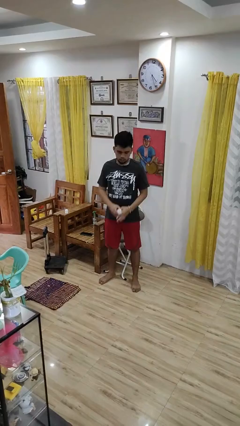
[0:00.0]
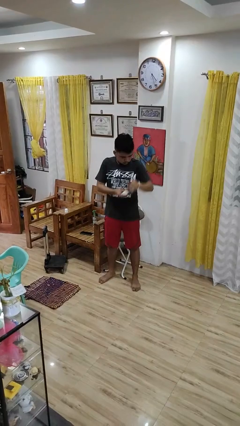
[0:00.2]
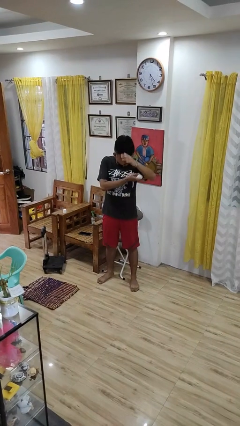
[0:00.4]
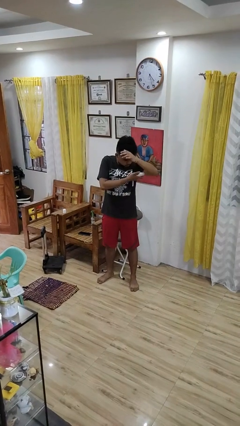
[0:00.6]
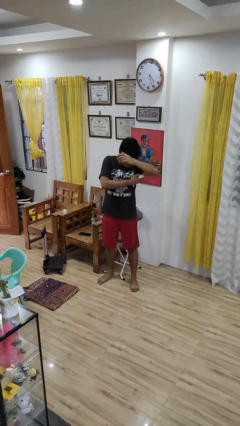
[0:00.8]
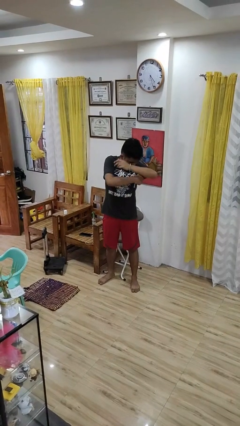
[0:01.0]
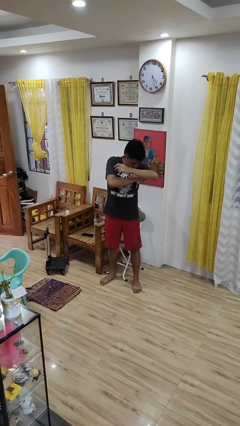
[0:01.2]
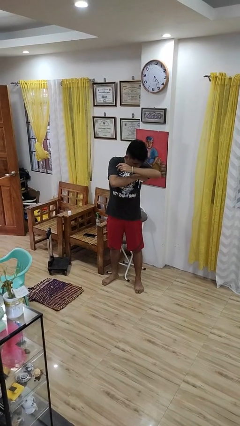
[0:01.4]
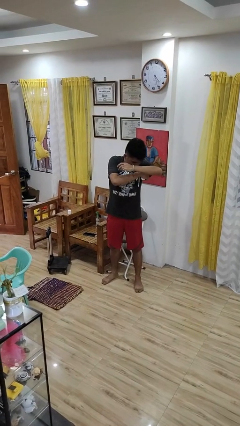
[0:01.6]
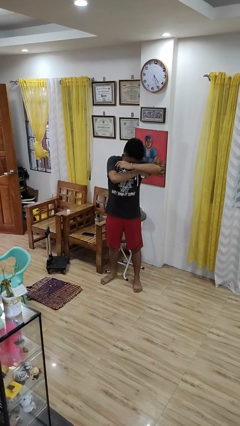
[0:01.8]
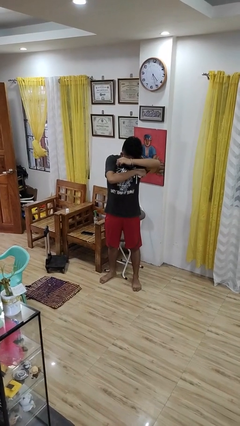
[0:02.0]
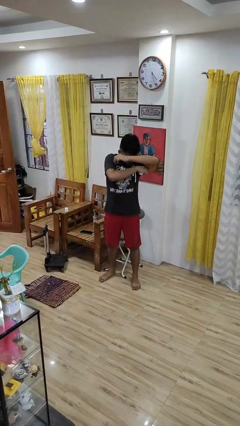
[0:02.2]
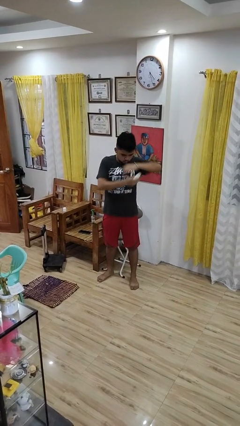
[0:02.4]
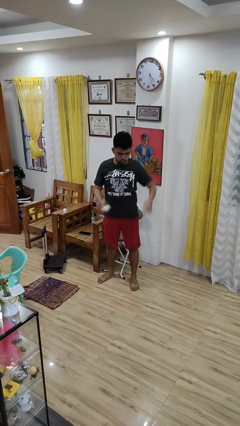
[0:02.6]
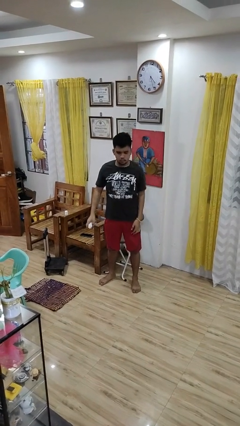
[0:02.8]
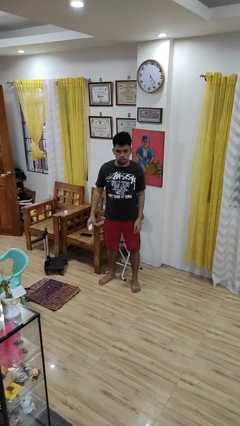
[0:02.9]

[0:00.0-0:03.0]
person applies deodorant

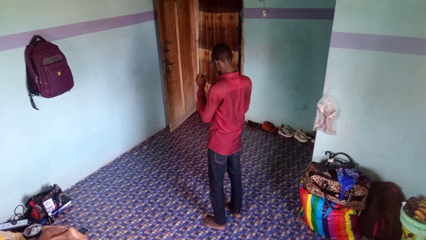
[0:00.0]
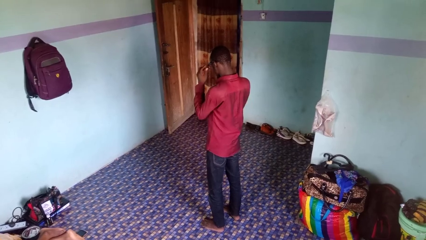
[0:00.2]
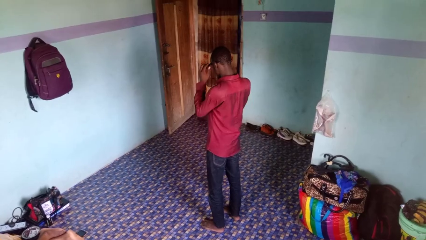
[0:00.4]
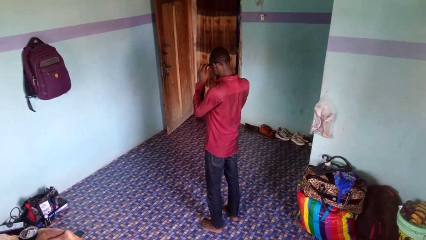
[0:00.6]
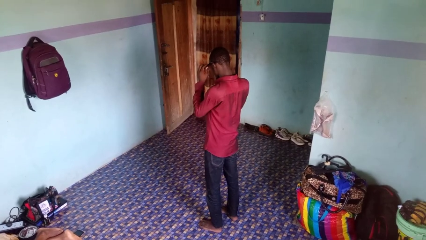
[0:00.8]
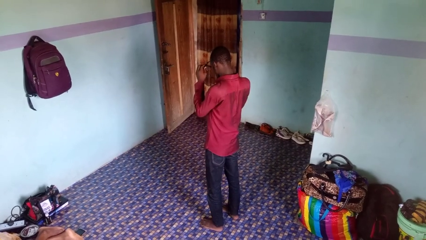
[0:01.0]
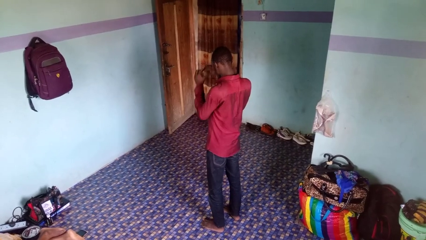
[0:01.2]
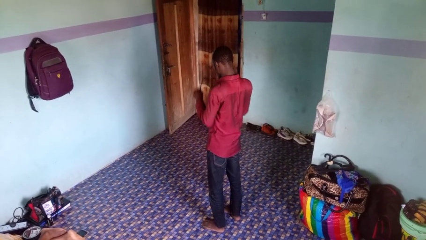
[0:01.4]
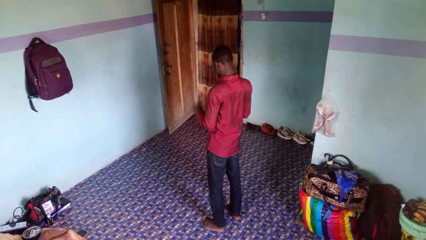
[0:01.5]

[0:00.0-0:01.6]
person takes off glasses

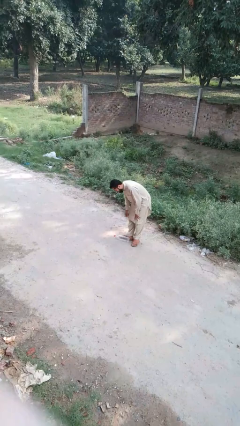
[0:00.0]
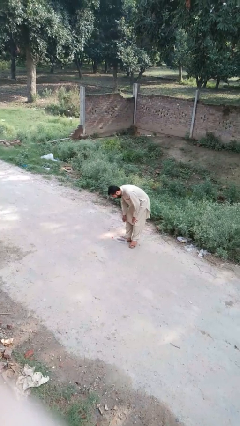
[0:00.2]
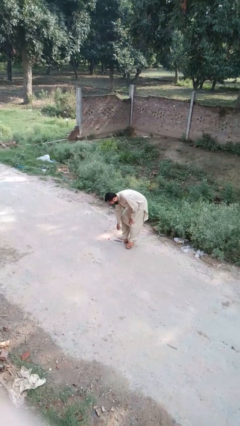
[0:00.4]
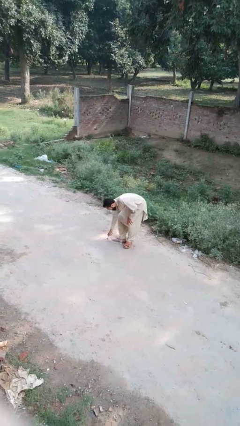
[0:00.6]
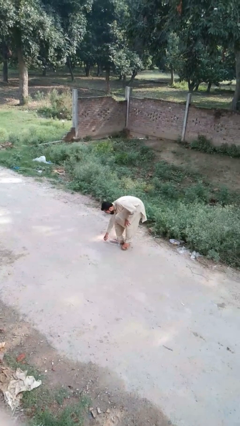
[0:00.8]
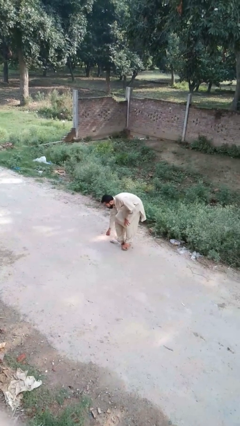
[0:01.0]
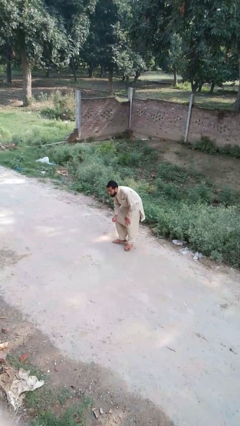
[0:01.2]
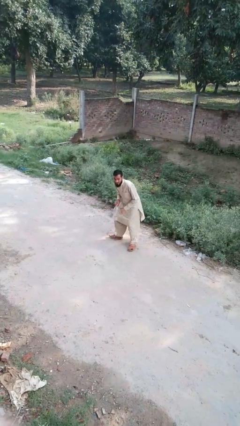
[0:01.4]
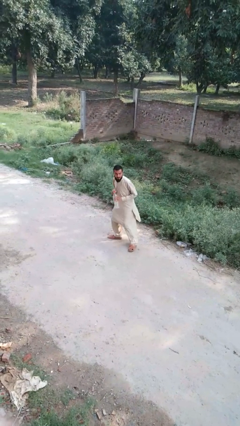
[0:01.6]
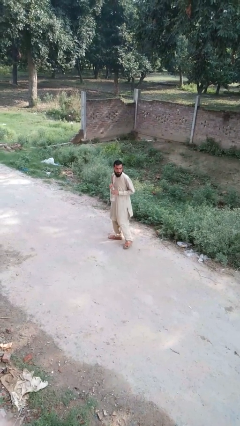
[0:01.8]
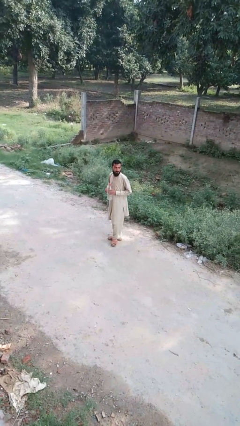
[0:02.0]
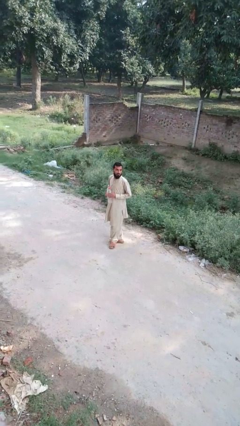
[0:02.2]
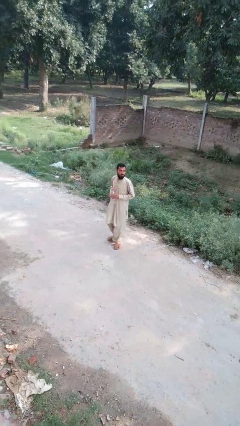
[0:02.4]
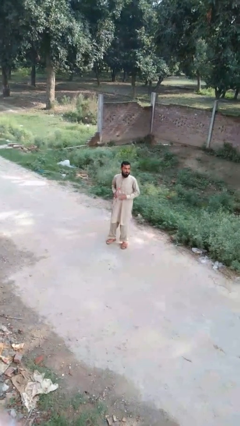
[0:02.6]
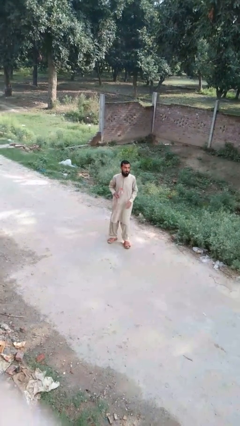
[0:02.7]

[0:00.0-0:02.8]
person picks up object from floor

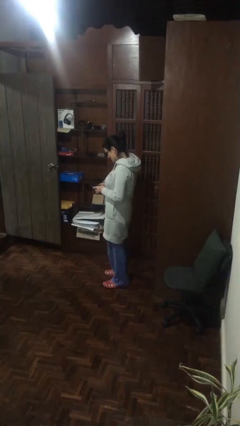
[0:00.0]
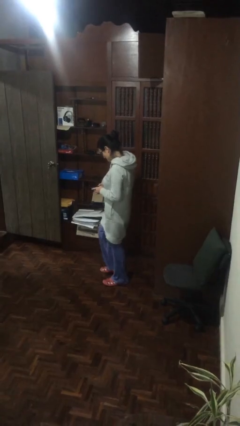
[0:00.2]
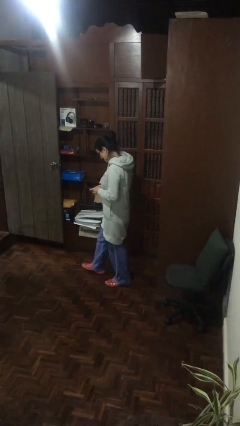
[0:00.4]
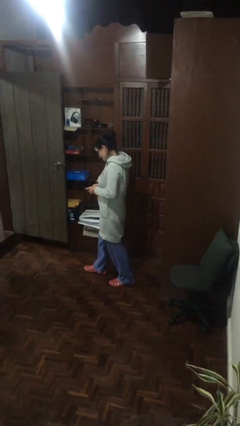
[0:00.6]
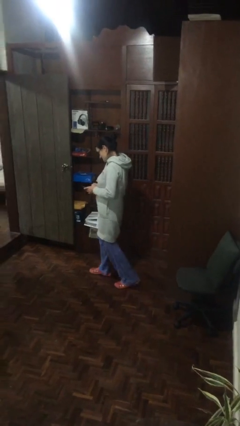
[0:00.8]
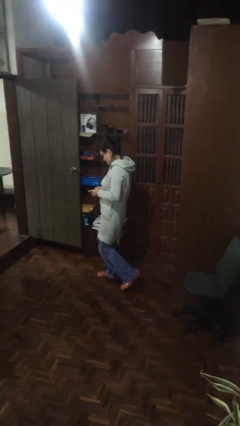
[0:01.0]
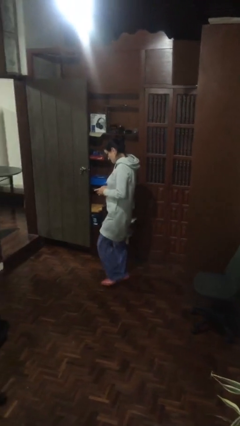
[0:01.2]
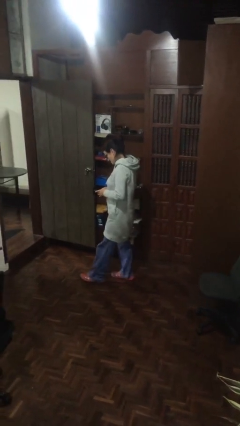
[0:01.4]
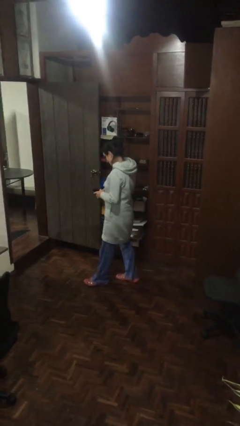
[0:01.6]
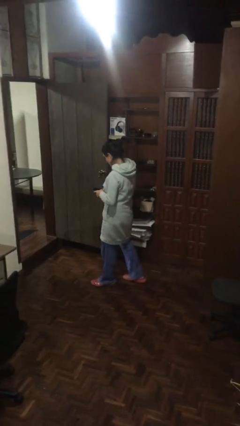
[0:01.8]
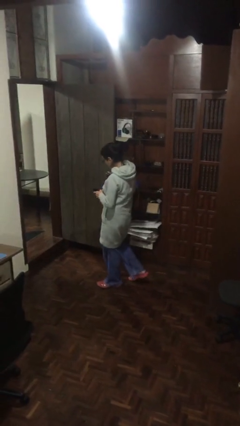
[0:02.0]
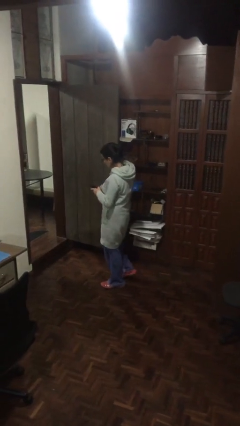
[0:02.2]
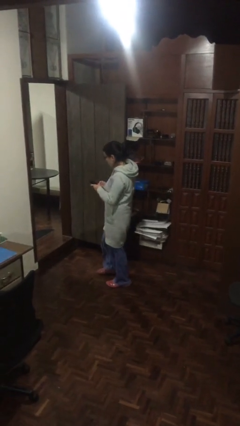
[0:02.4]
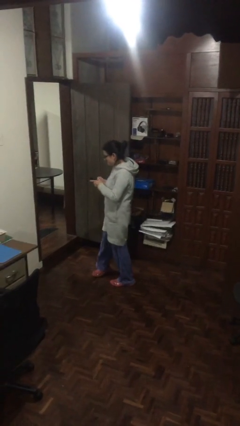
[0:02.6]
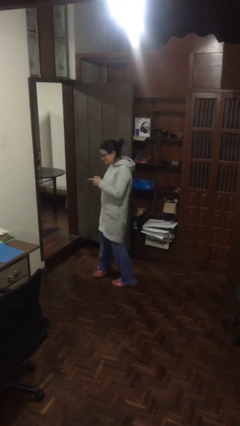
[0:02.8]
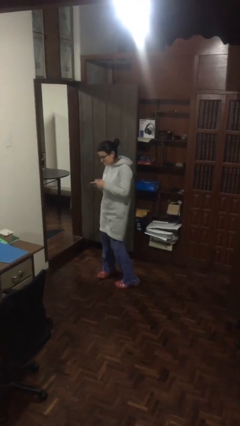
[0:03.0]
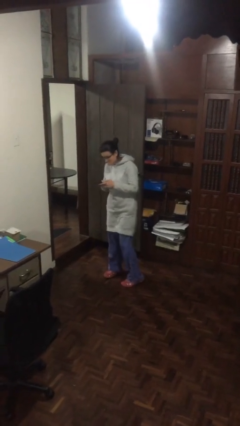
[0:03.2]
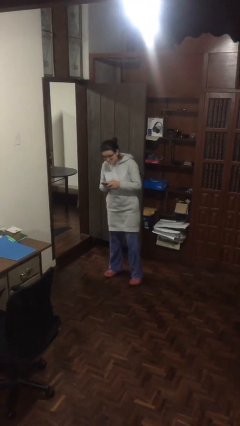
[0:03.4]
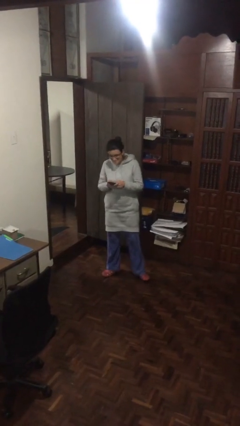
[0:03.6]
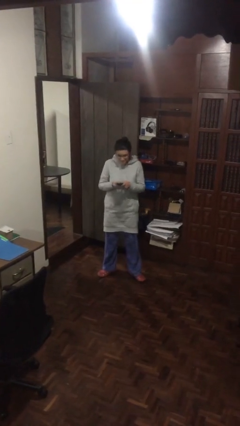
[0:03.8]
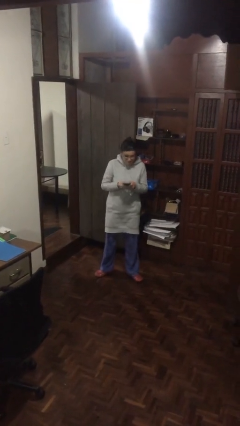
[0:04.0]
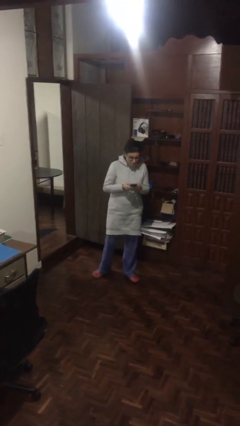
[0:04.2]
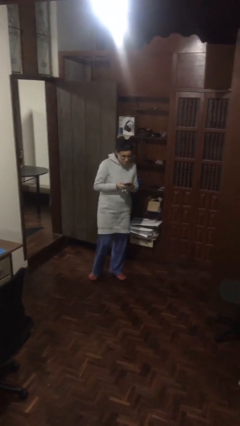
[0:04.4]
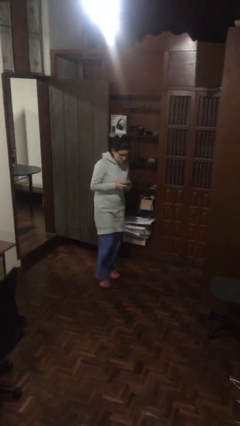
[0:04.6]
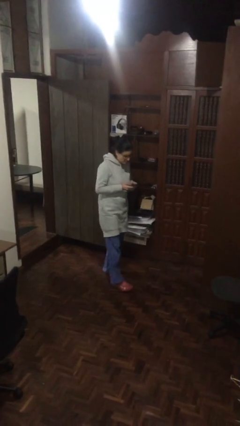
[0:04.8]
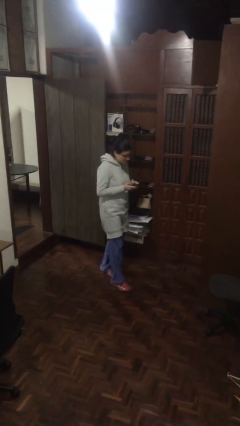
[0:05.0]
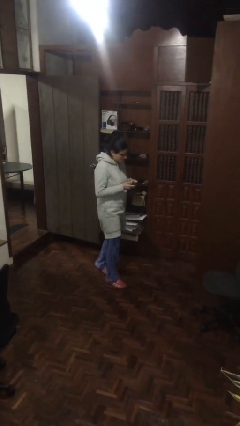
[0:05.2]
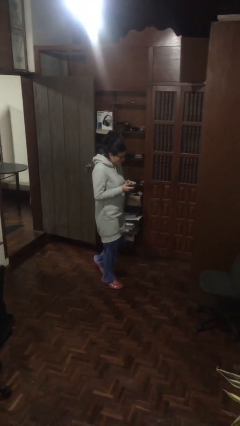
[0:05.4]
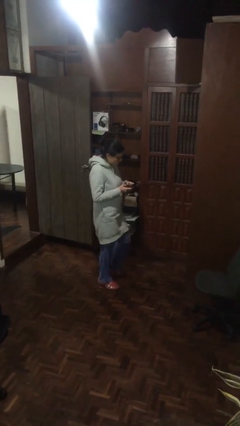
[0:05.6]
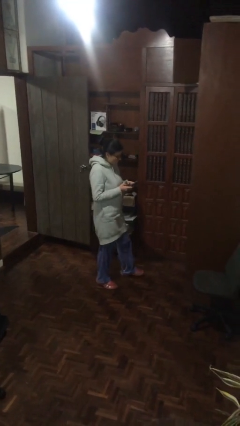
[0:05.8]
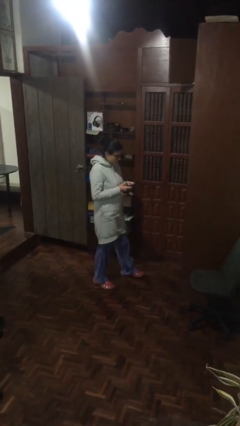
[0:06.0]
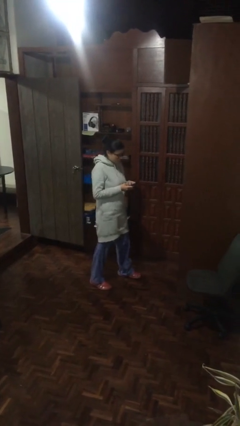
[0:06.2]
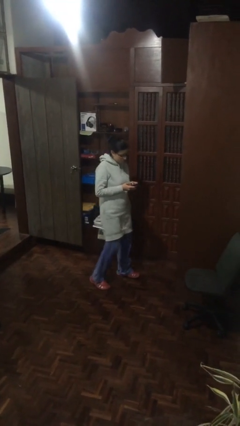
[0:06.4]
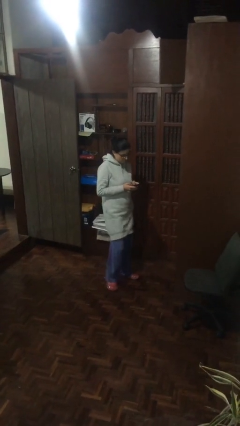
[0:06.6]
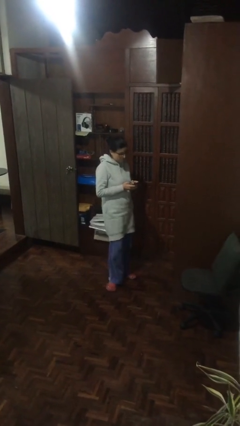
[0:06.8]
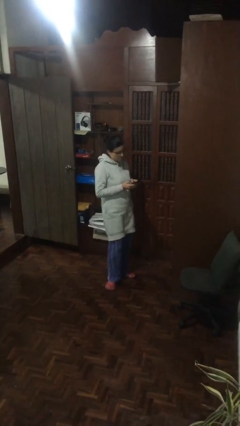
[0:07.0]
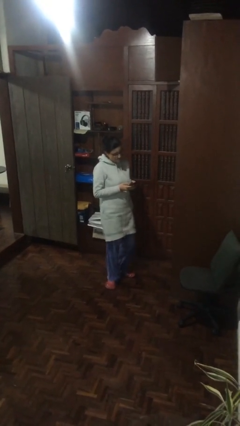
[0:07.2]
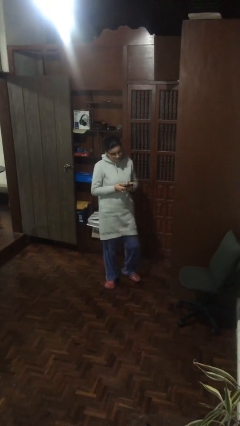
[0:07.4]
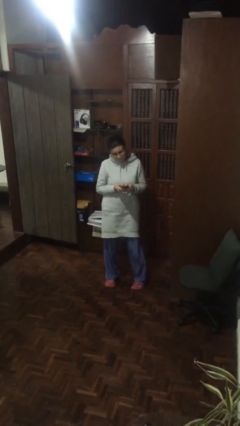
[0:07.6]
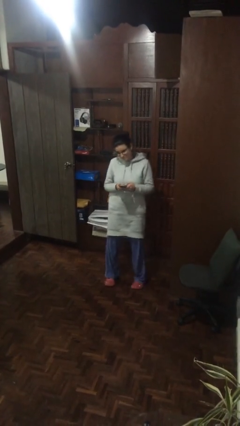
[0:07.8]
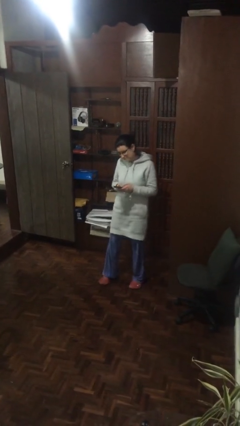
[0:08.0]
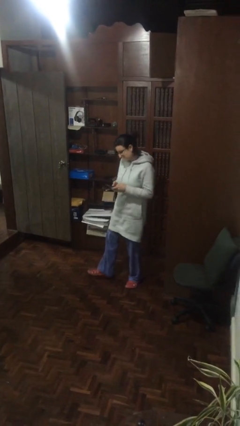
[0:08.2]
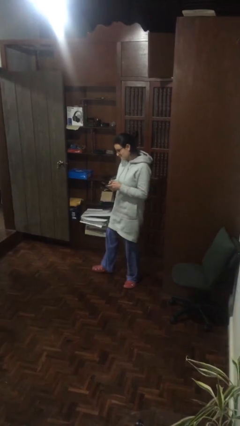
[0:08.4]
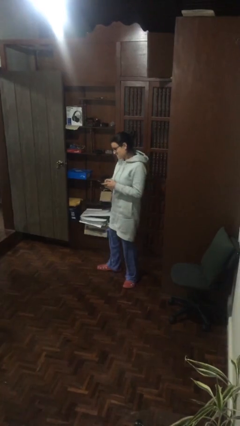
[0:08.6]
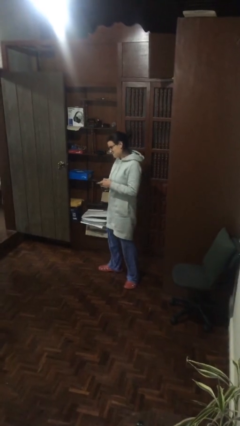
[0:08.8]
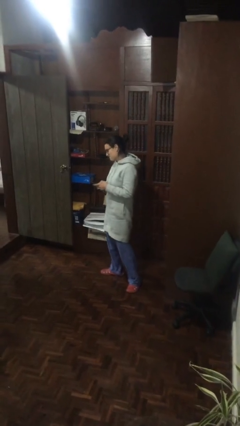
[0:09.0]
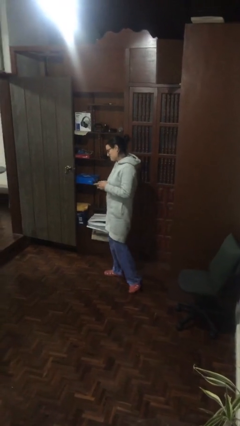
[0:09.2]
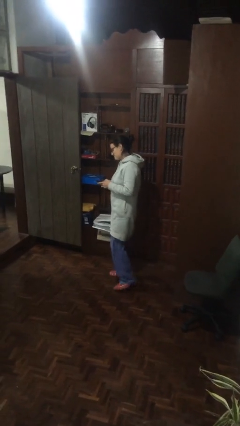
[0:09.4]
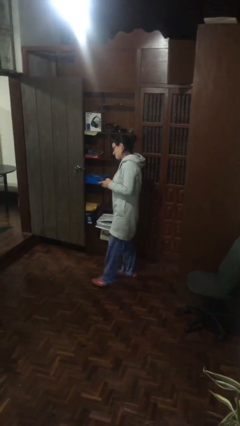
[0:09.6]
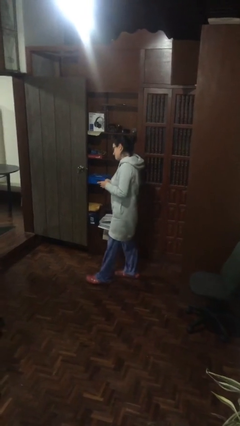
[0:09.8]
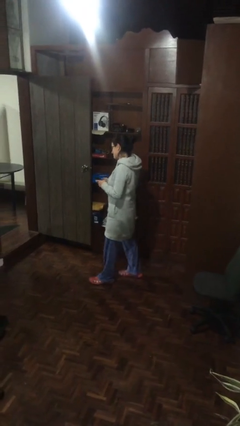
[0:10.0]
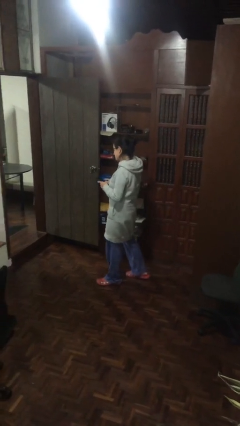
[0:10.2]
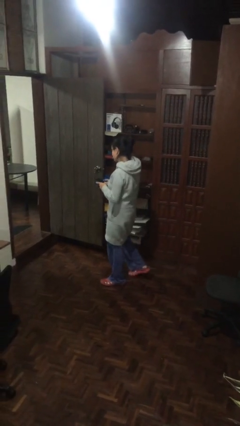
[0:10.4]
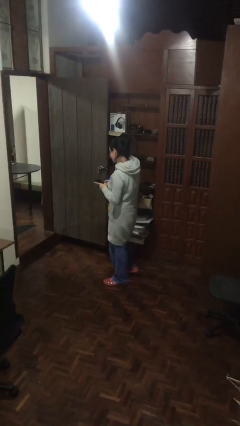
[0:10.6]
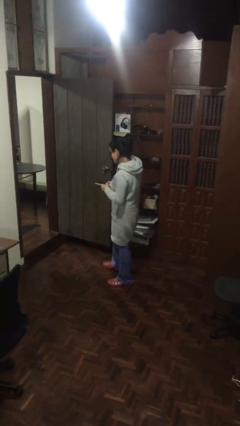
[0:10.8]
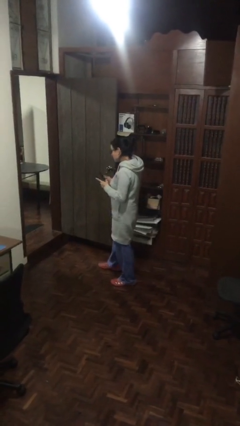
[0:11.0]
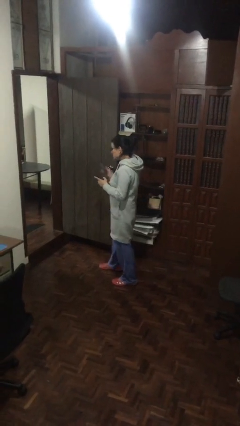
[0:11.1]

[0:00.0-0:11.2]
person texts on phone
